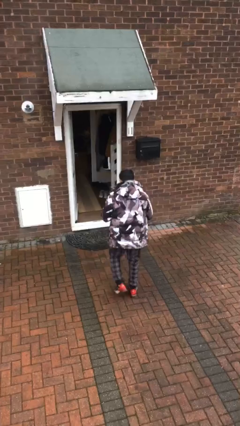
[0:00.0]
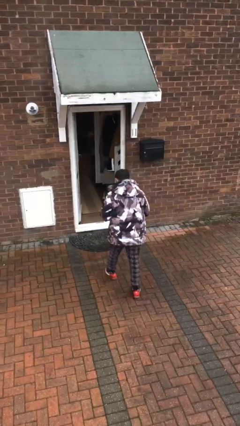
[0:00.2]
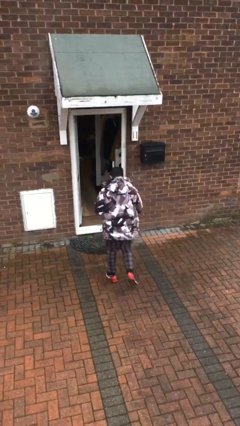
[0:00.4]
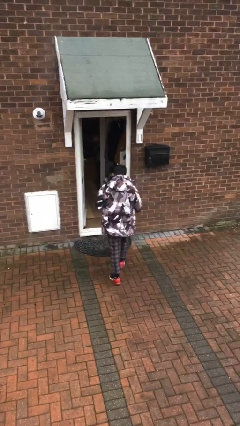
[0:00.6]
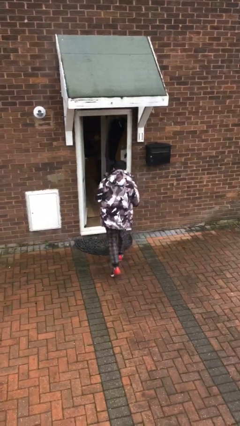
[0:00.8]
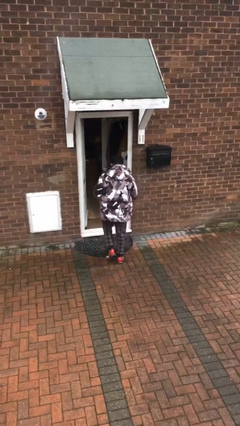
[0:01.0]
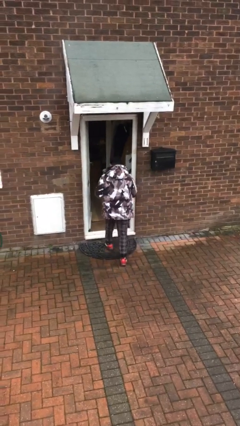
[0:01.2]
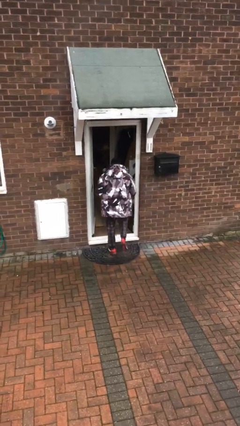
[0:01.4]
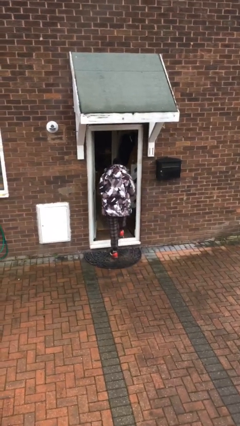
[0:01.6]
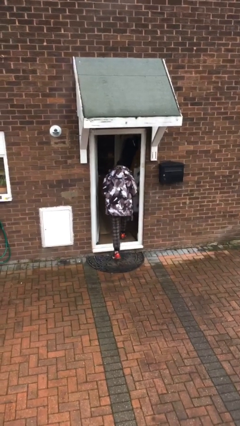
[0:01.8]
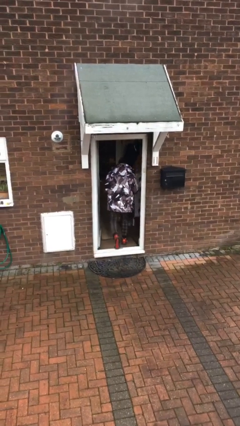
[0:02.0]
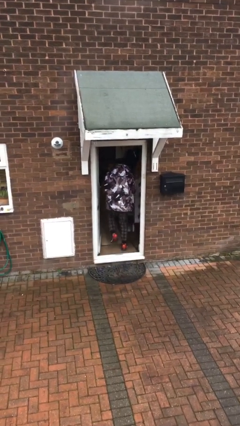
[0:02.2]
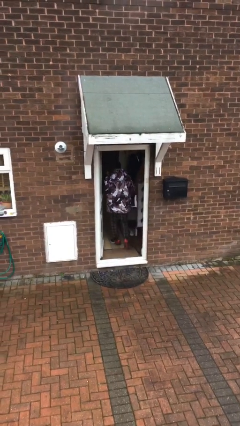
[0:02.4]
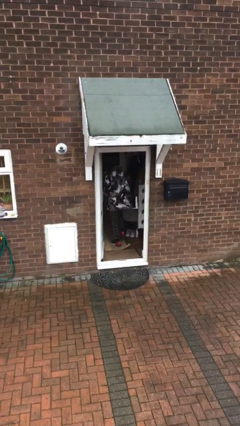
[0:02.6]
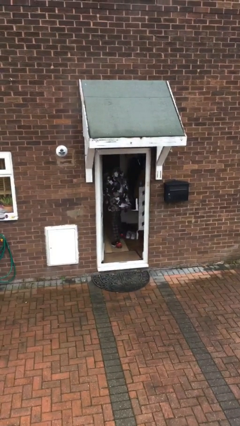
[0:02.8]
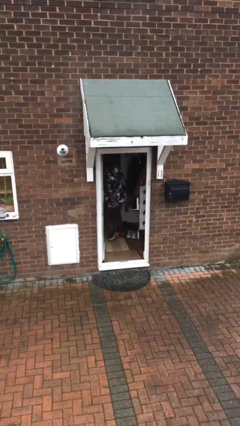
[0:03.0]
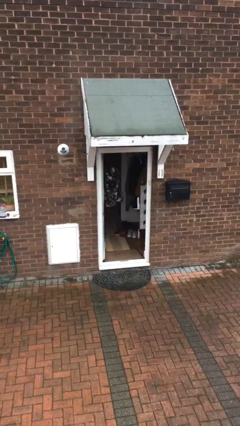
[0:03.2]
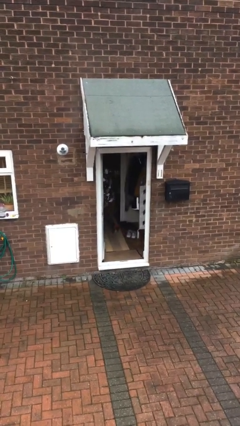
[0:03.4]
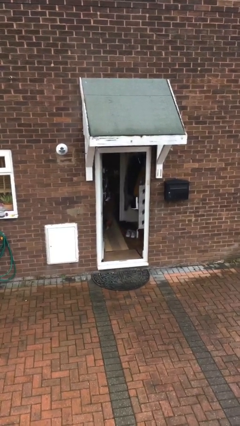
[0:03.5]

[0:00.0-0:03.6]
person exits scene through structure

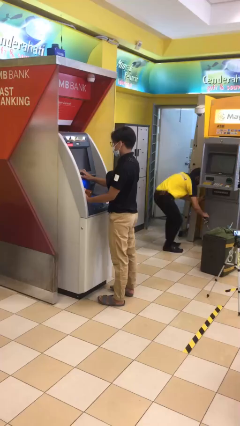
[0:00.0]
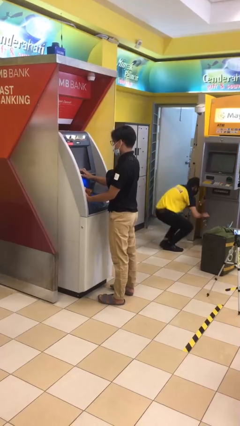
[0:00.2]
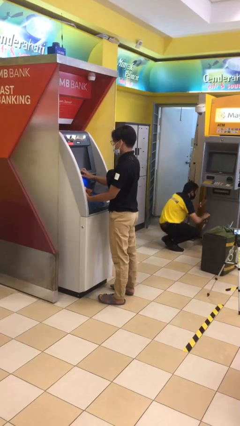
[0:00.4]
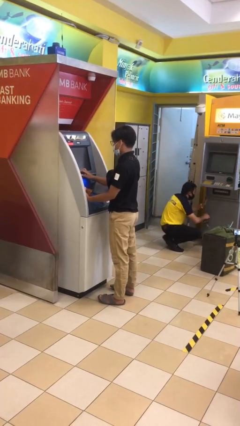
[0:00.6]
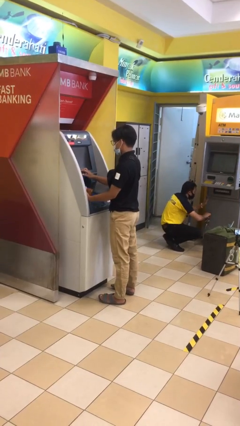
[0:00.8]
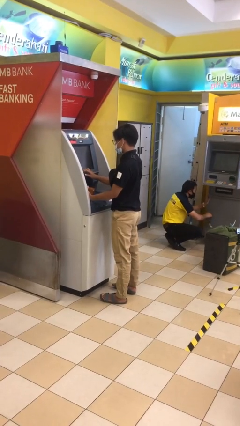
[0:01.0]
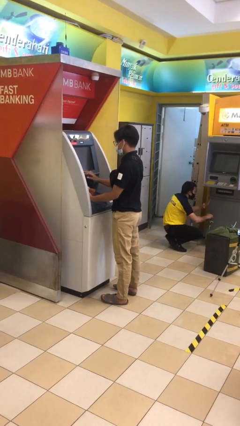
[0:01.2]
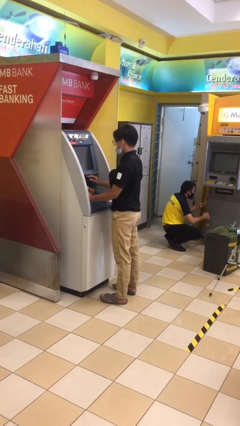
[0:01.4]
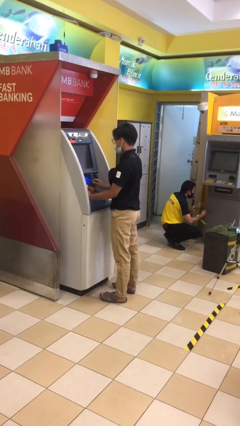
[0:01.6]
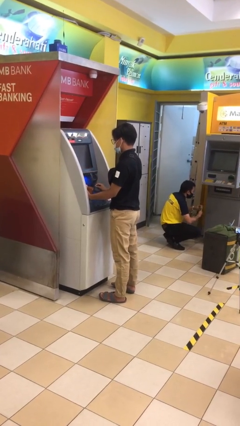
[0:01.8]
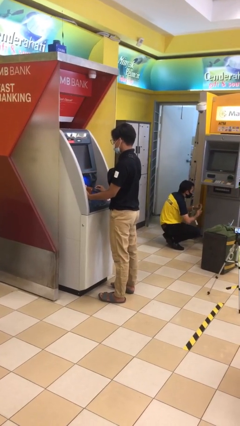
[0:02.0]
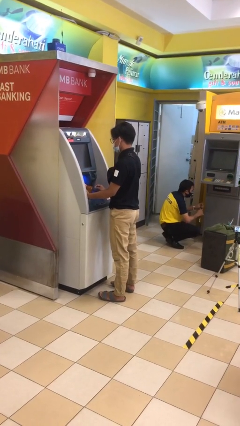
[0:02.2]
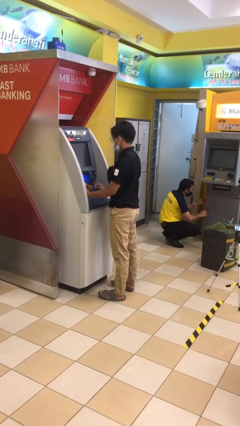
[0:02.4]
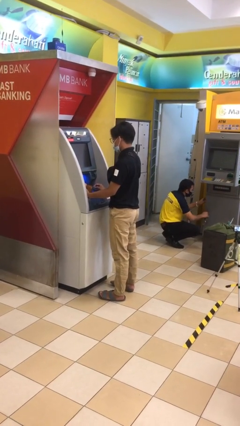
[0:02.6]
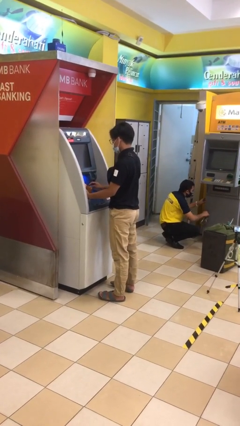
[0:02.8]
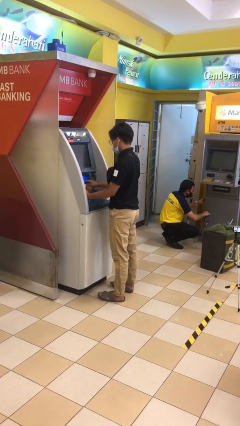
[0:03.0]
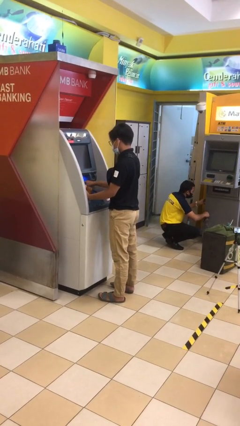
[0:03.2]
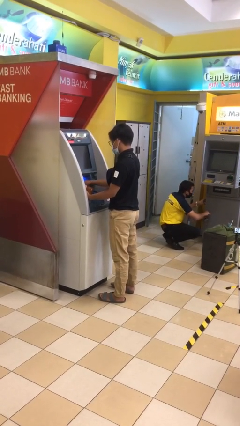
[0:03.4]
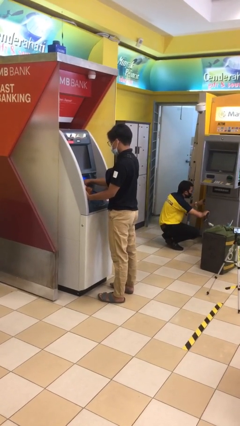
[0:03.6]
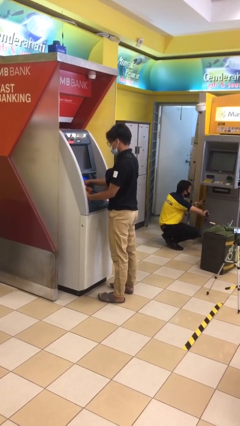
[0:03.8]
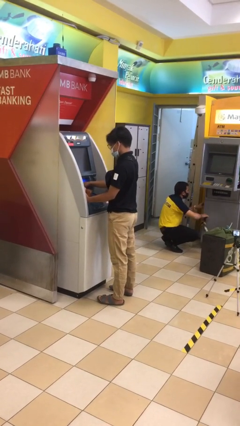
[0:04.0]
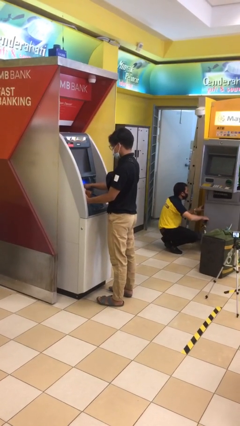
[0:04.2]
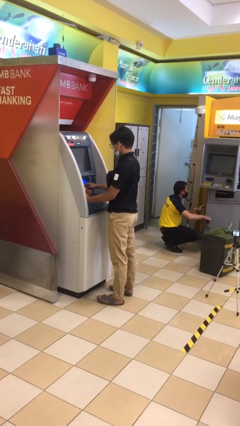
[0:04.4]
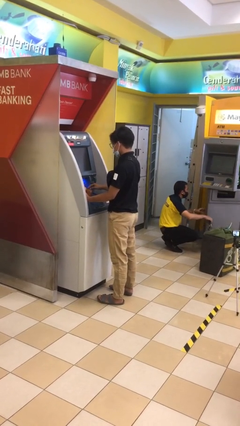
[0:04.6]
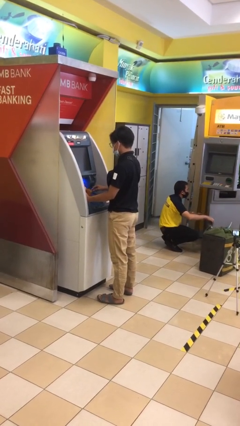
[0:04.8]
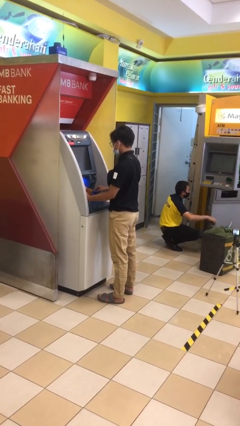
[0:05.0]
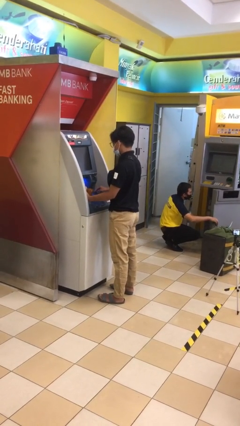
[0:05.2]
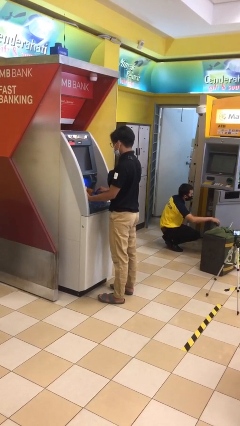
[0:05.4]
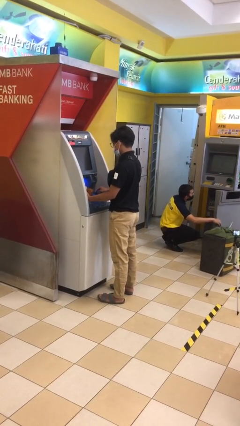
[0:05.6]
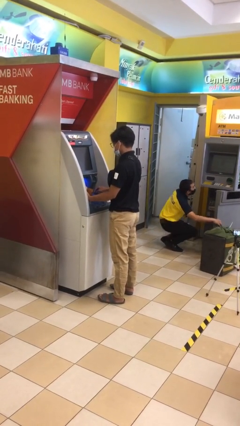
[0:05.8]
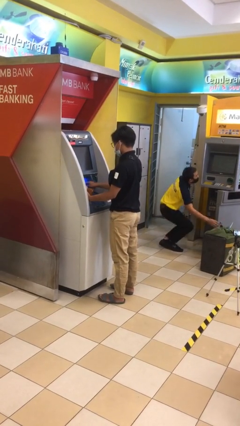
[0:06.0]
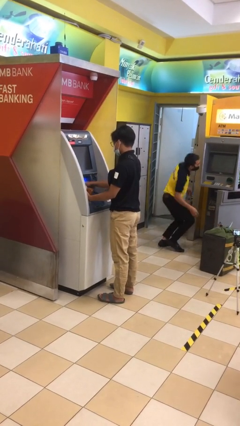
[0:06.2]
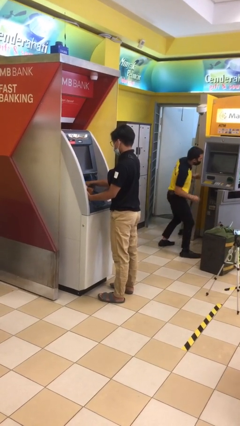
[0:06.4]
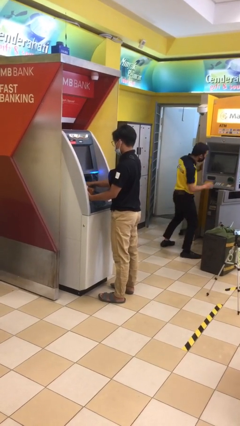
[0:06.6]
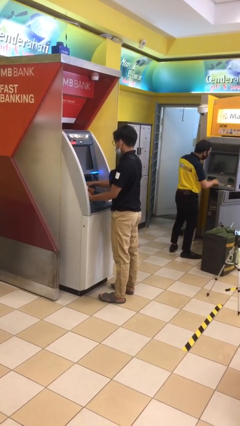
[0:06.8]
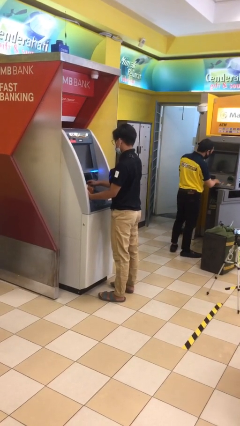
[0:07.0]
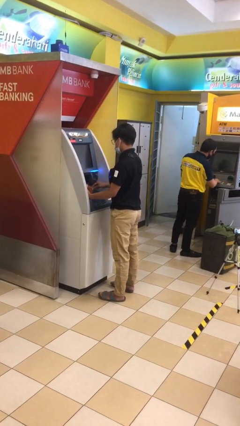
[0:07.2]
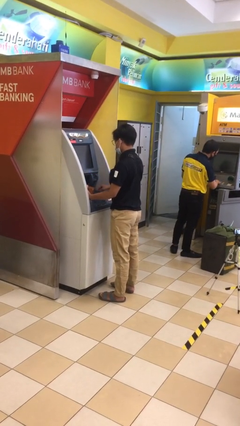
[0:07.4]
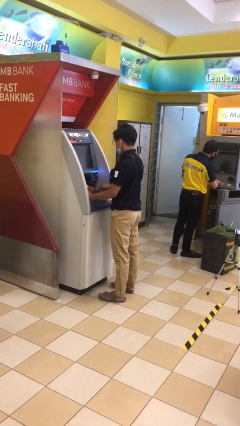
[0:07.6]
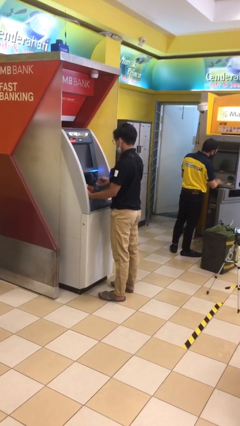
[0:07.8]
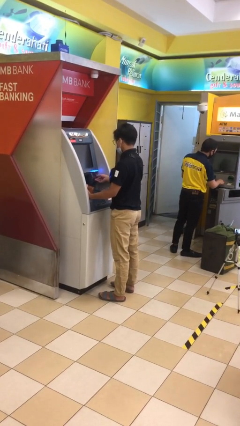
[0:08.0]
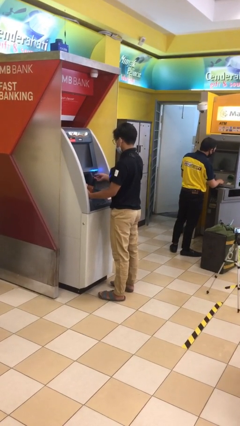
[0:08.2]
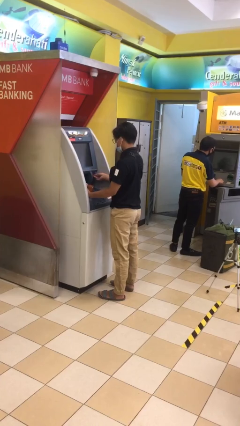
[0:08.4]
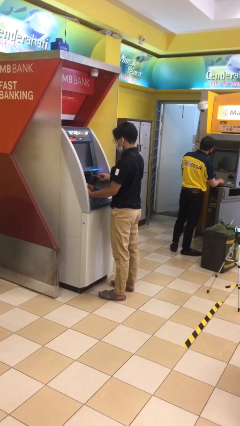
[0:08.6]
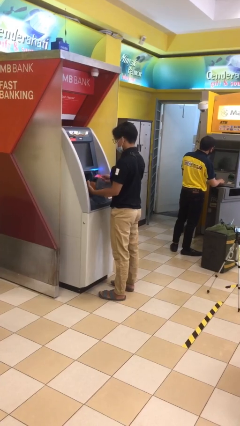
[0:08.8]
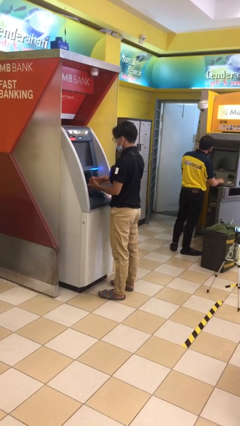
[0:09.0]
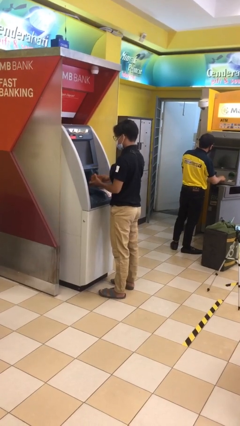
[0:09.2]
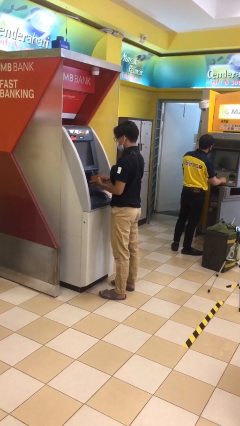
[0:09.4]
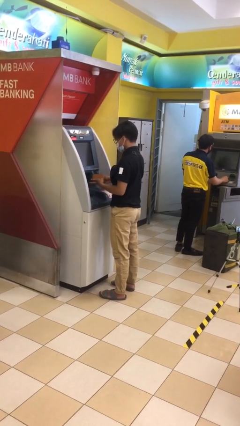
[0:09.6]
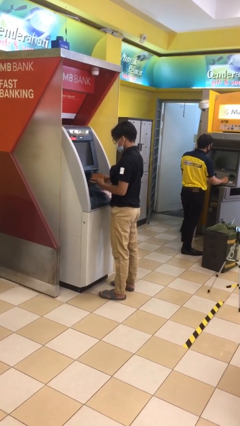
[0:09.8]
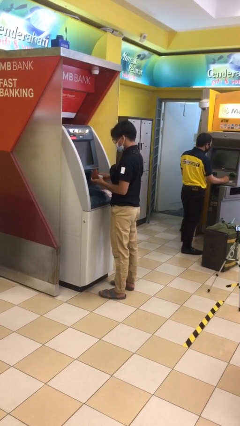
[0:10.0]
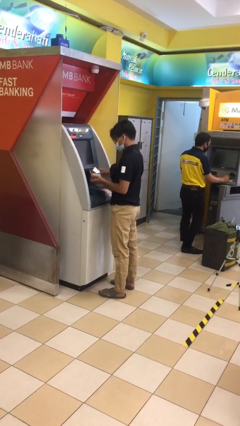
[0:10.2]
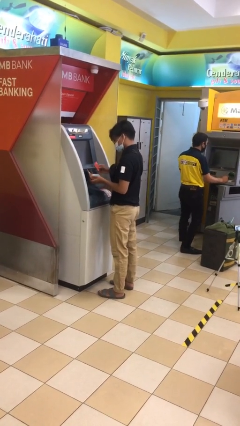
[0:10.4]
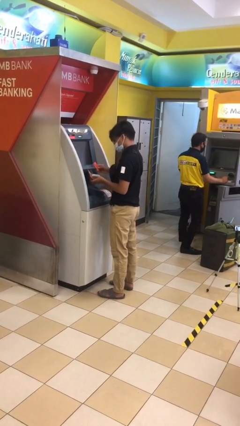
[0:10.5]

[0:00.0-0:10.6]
person purchases from machine

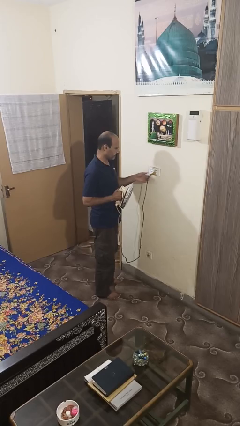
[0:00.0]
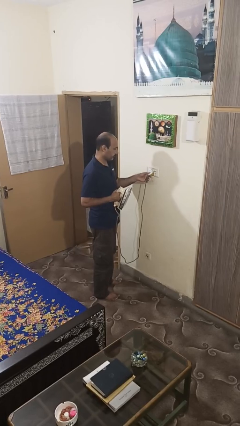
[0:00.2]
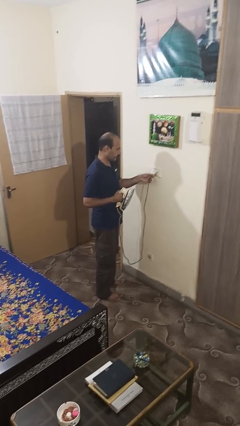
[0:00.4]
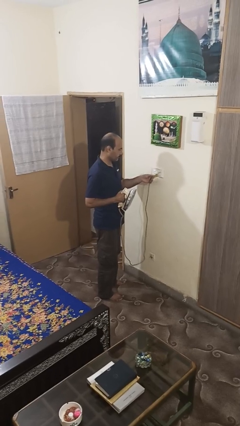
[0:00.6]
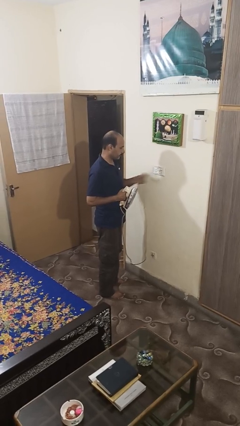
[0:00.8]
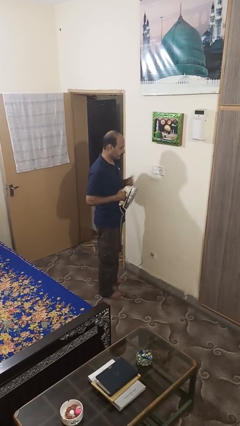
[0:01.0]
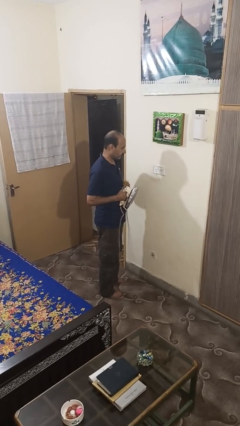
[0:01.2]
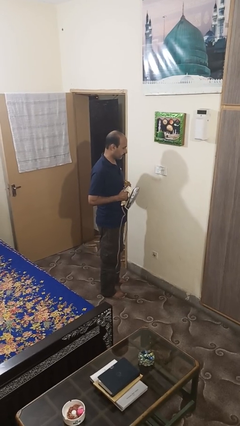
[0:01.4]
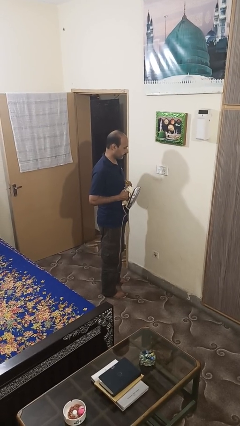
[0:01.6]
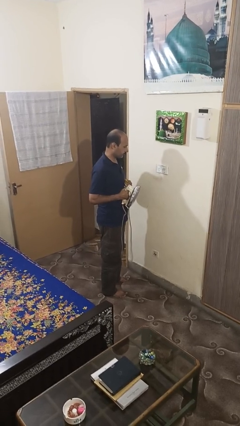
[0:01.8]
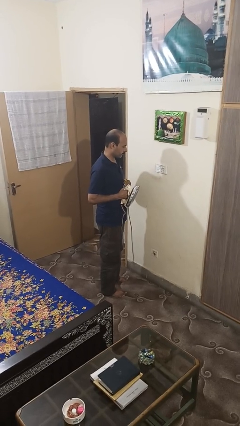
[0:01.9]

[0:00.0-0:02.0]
person unplugs from electrical socket

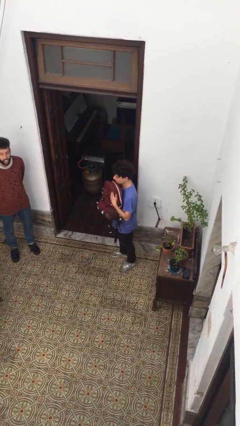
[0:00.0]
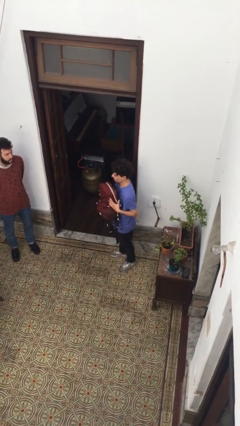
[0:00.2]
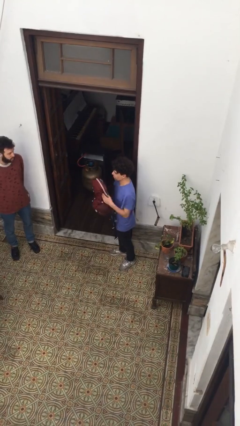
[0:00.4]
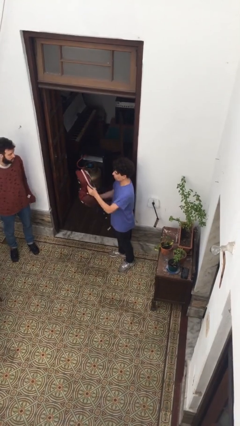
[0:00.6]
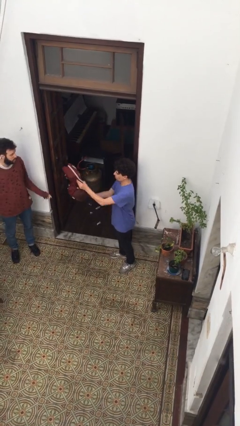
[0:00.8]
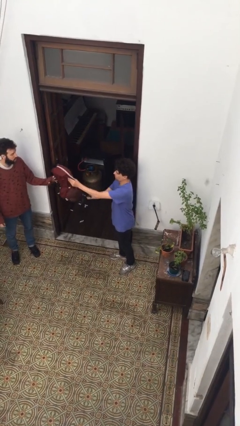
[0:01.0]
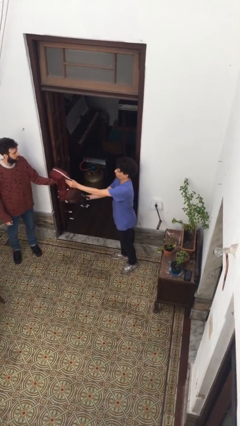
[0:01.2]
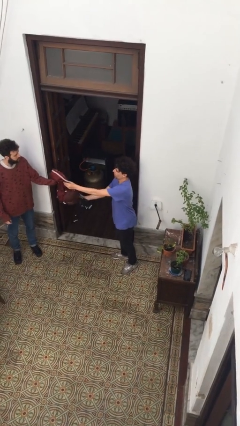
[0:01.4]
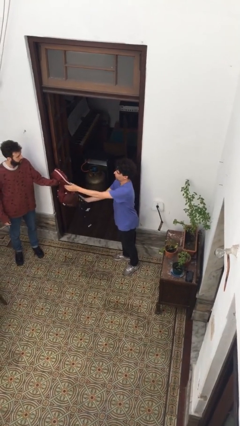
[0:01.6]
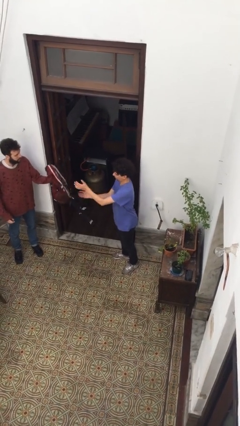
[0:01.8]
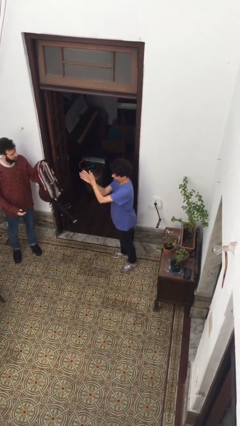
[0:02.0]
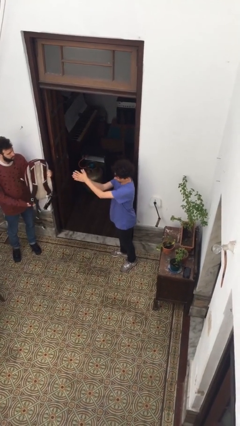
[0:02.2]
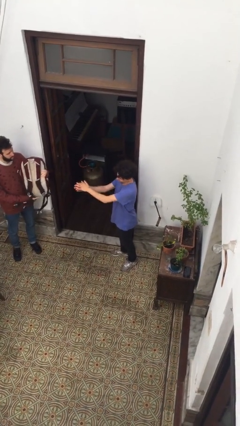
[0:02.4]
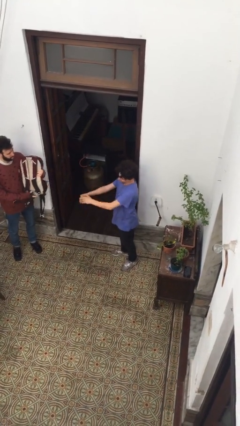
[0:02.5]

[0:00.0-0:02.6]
person transfers object to person
